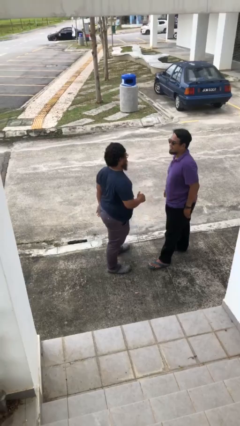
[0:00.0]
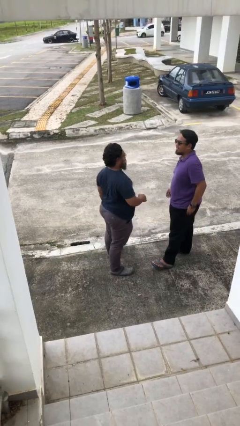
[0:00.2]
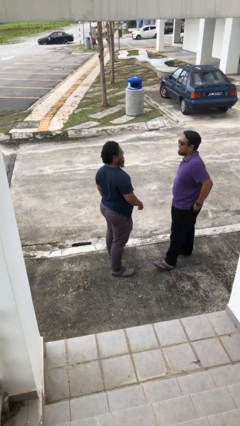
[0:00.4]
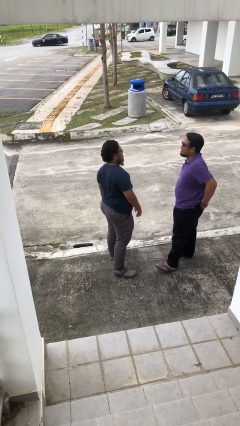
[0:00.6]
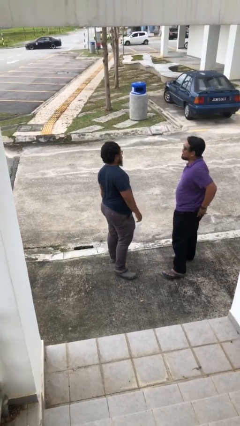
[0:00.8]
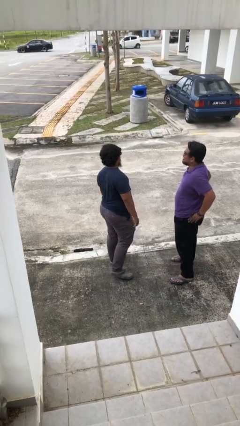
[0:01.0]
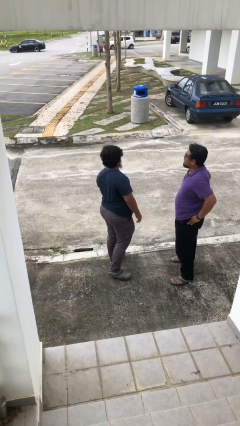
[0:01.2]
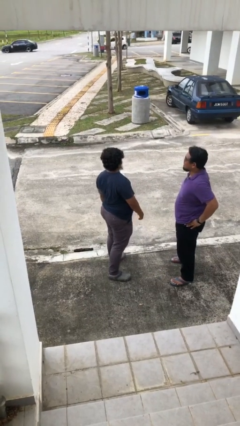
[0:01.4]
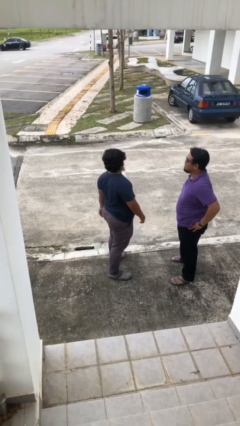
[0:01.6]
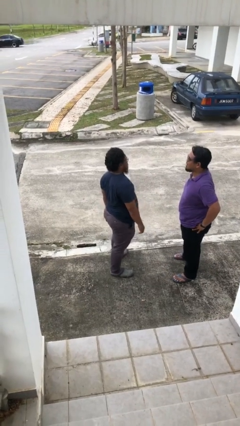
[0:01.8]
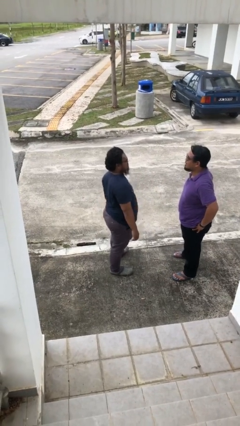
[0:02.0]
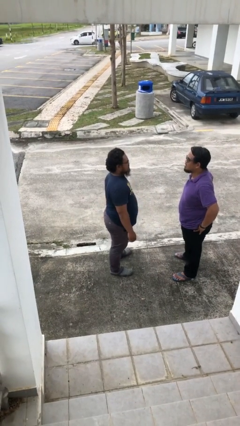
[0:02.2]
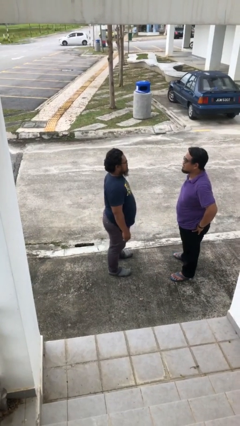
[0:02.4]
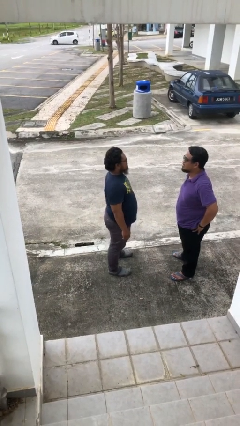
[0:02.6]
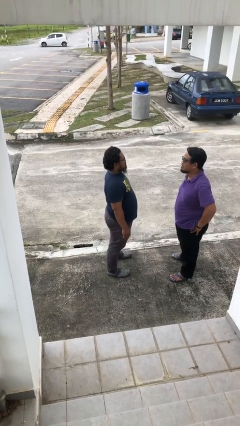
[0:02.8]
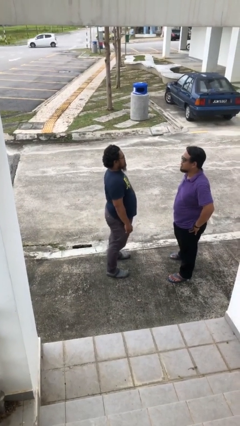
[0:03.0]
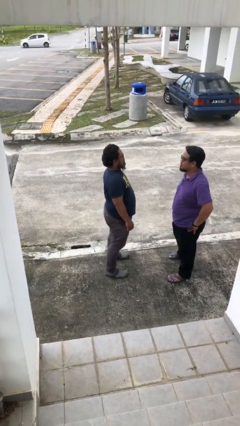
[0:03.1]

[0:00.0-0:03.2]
person talks to person

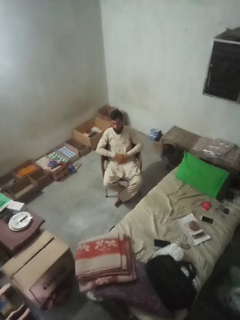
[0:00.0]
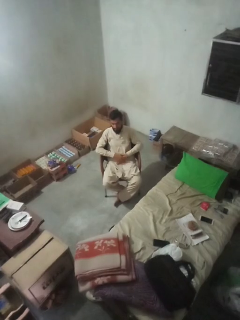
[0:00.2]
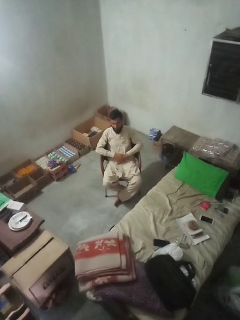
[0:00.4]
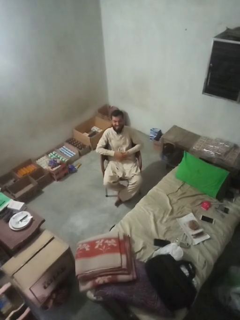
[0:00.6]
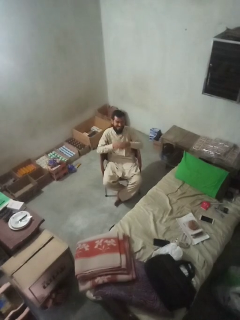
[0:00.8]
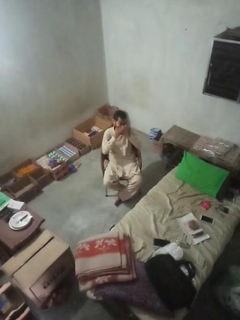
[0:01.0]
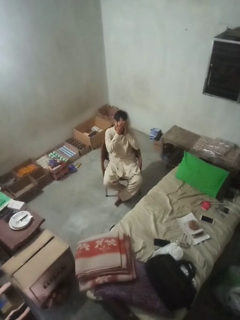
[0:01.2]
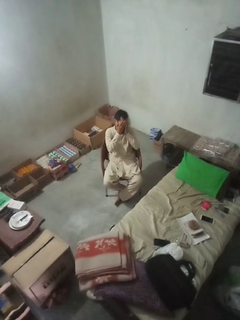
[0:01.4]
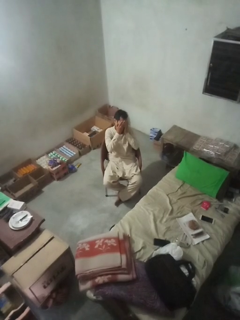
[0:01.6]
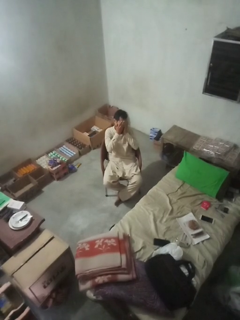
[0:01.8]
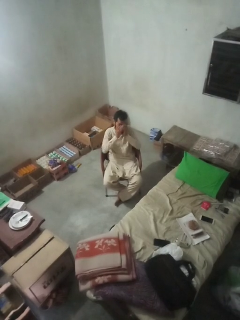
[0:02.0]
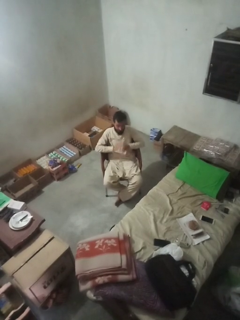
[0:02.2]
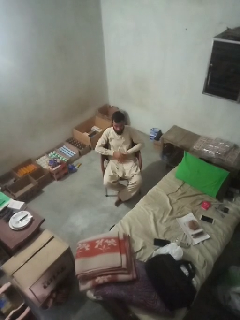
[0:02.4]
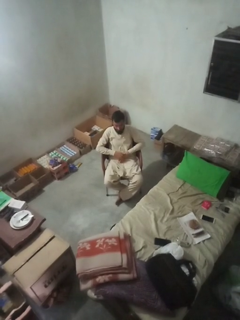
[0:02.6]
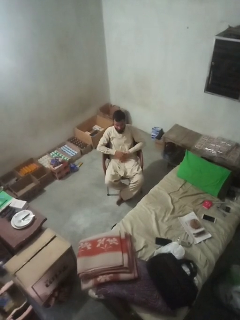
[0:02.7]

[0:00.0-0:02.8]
person covers face with hands

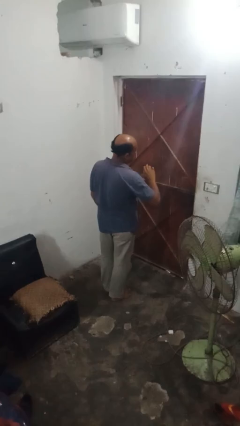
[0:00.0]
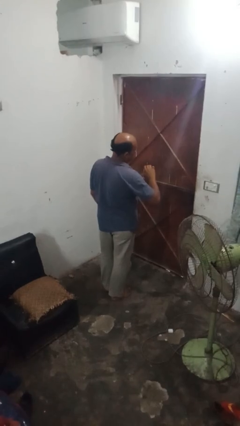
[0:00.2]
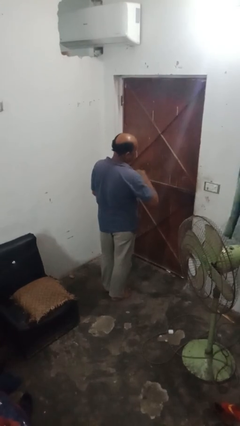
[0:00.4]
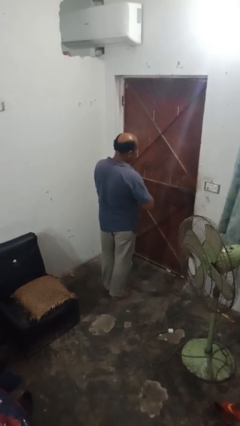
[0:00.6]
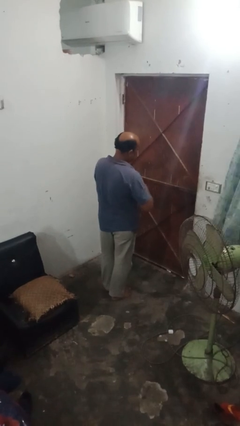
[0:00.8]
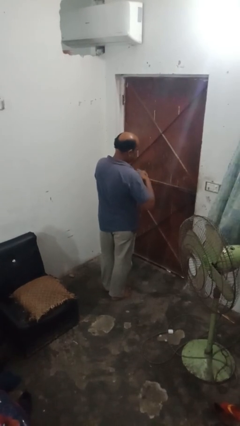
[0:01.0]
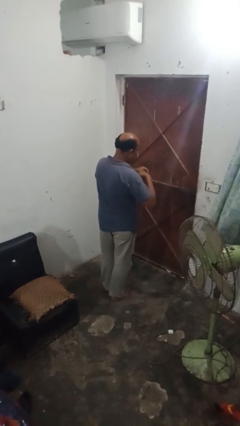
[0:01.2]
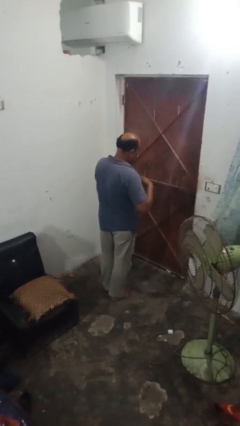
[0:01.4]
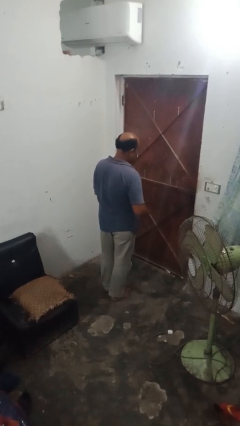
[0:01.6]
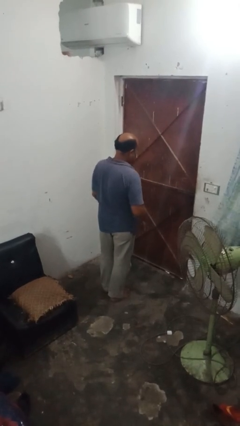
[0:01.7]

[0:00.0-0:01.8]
person takes off ring

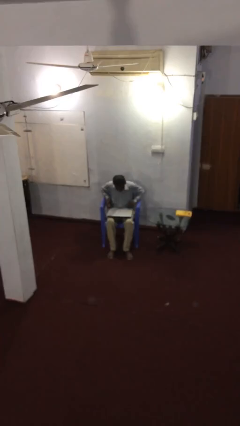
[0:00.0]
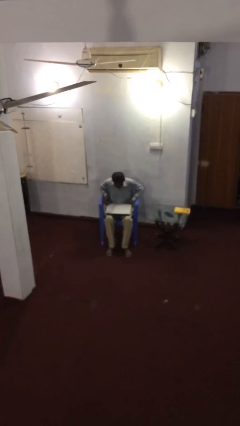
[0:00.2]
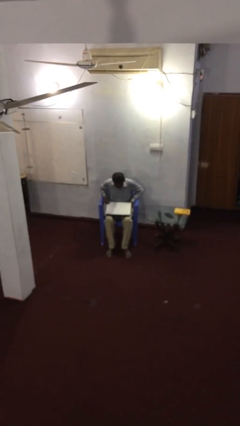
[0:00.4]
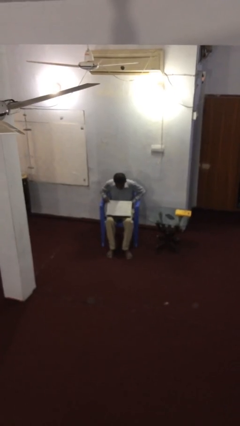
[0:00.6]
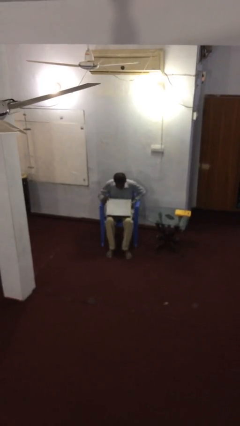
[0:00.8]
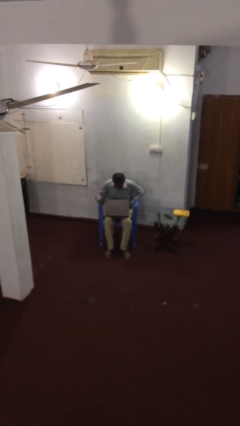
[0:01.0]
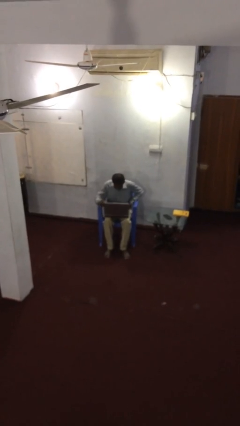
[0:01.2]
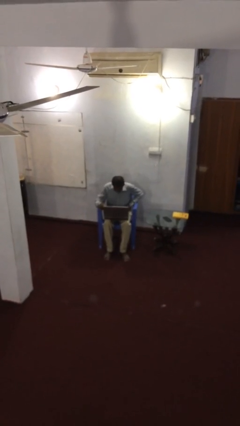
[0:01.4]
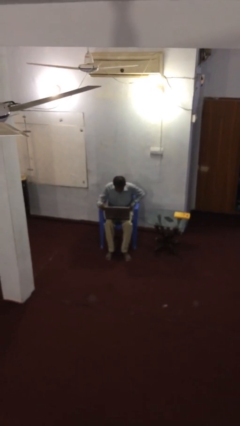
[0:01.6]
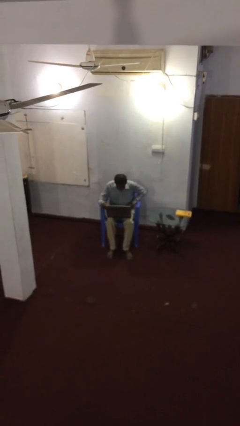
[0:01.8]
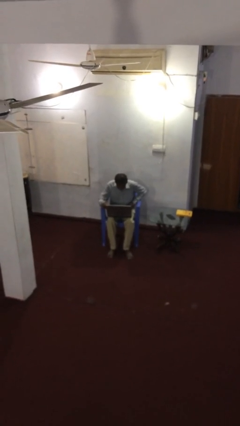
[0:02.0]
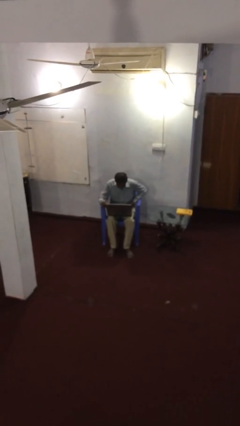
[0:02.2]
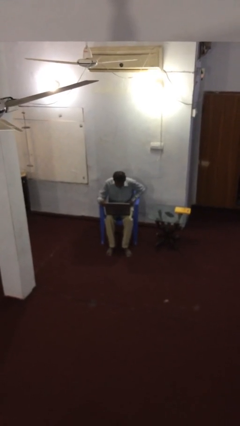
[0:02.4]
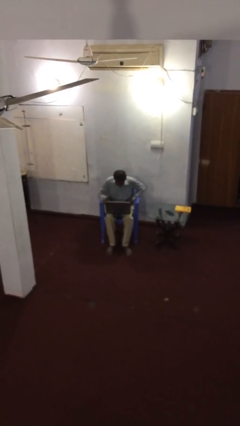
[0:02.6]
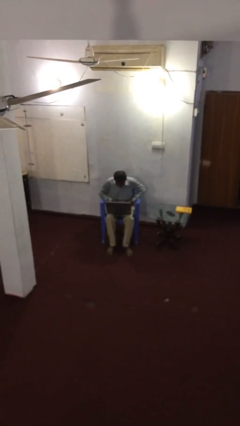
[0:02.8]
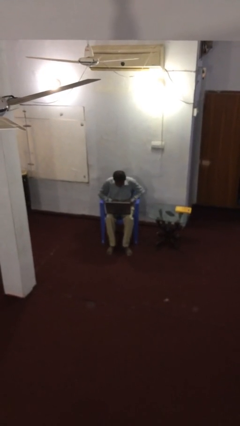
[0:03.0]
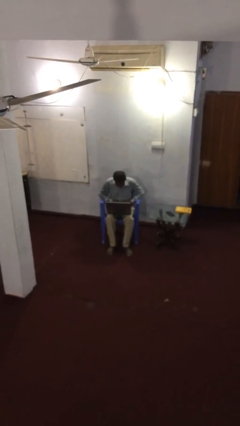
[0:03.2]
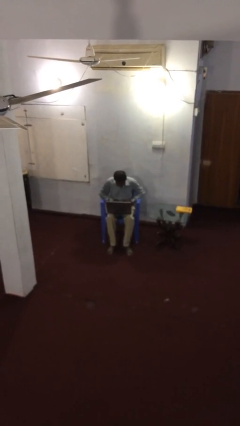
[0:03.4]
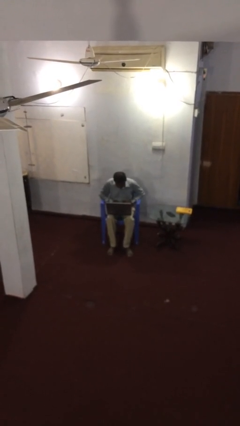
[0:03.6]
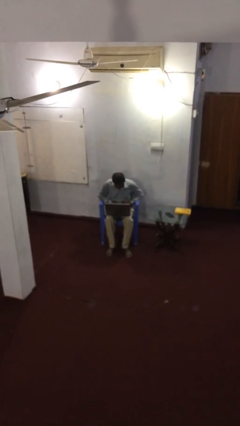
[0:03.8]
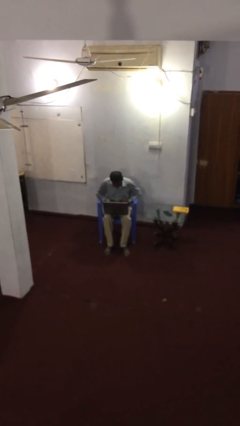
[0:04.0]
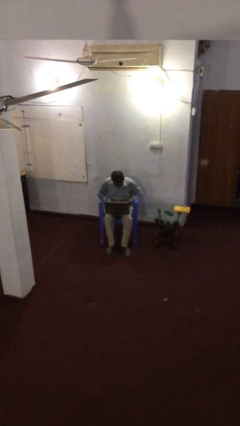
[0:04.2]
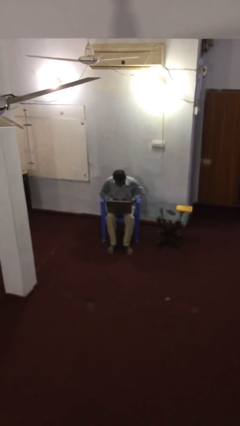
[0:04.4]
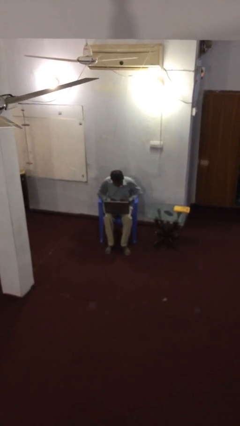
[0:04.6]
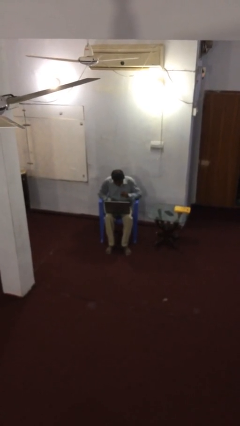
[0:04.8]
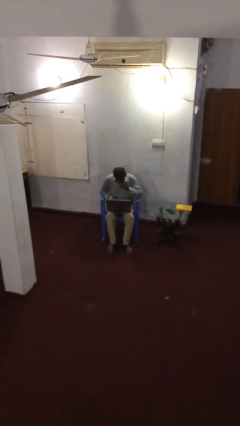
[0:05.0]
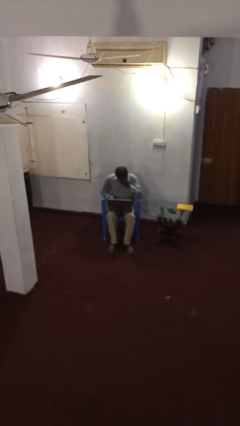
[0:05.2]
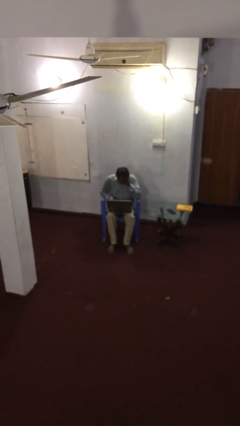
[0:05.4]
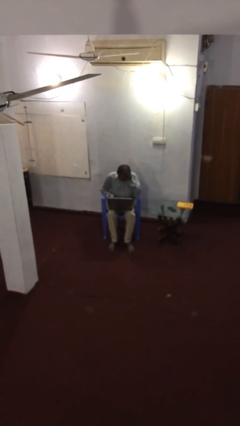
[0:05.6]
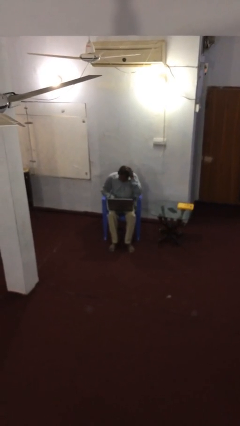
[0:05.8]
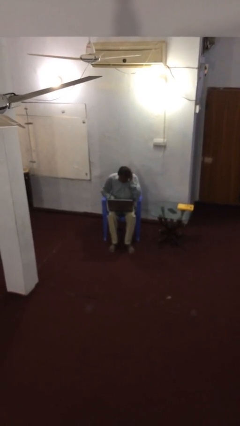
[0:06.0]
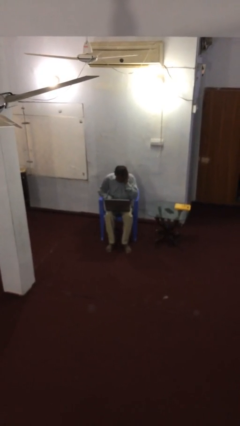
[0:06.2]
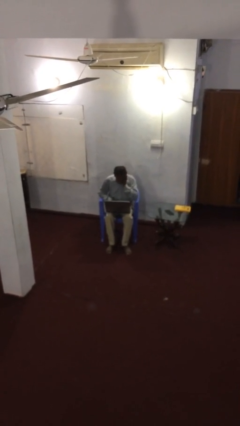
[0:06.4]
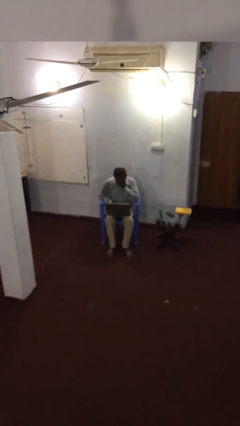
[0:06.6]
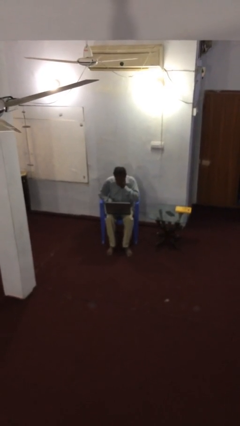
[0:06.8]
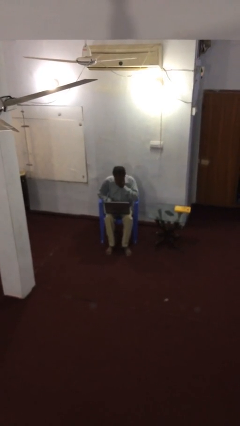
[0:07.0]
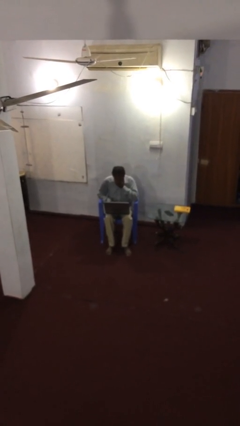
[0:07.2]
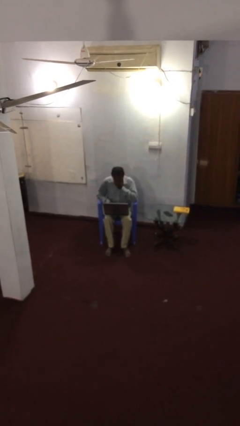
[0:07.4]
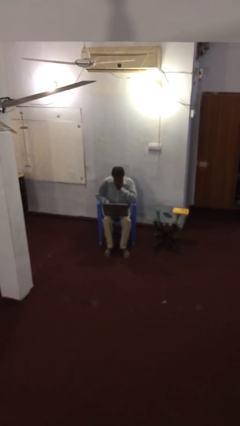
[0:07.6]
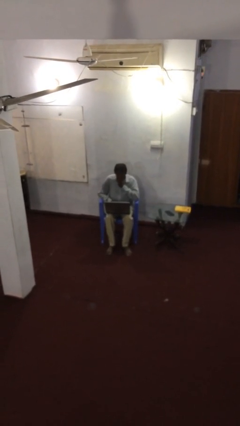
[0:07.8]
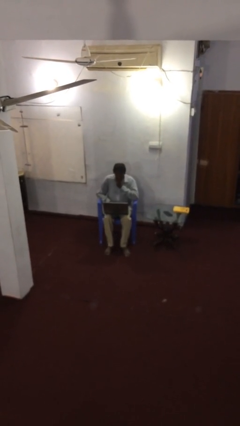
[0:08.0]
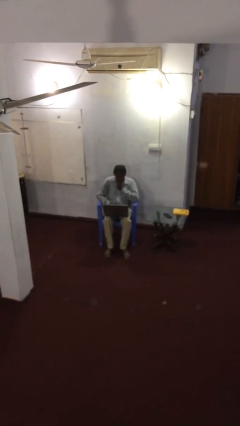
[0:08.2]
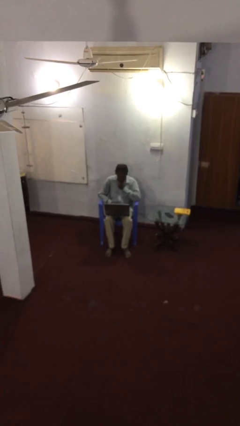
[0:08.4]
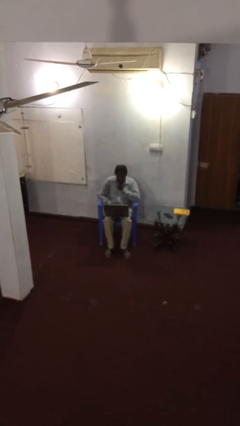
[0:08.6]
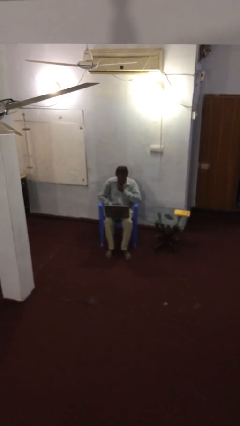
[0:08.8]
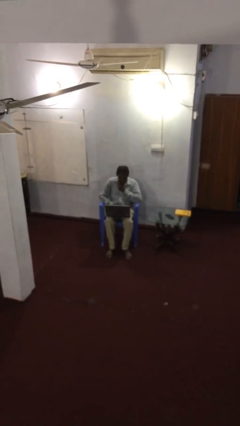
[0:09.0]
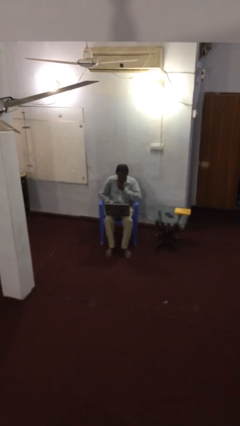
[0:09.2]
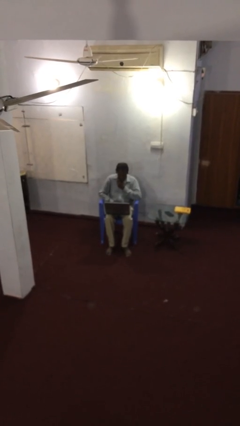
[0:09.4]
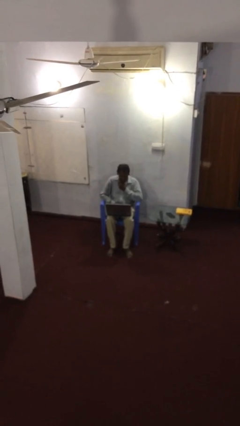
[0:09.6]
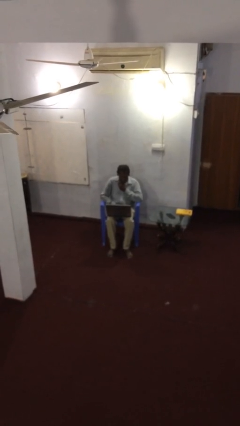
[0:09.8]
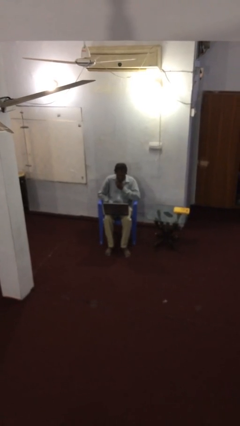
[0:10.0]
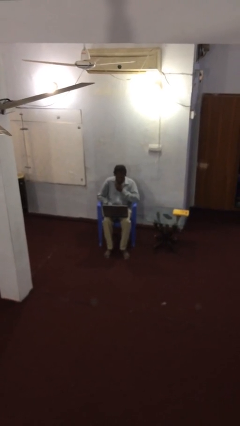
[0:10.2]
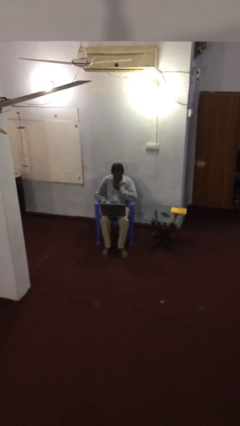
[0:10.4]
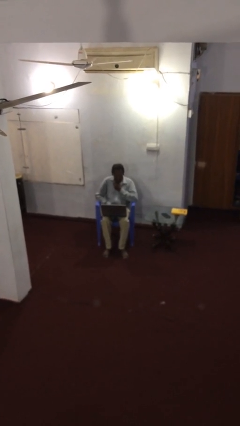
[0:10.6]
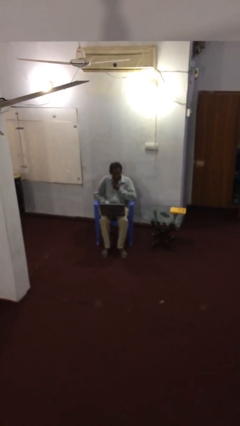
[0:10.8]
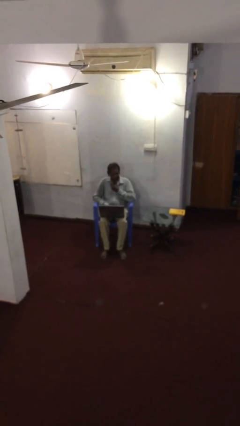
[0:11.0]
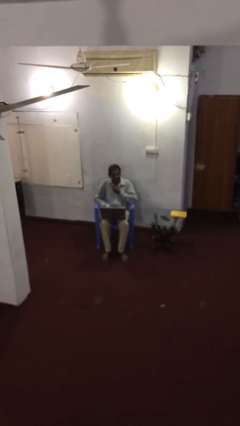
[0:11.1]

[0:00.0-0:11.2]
person interacts with laptop
